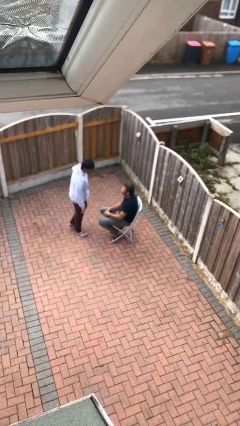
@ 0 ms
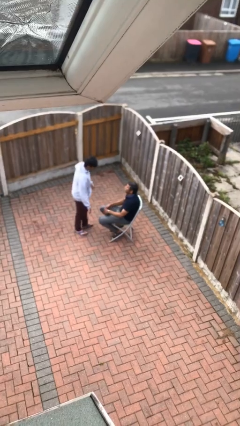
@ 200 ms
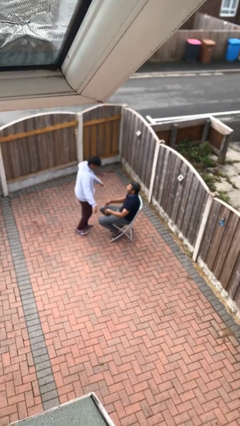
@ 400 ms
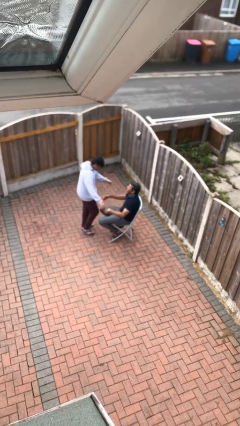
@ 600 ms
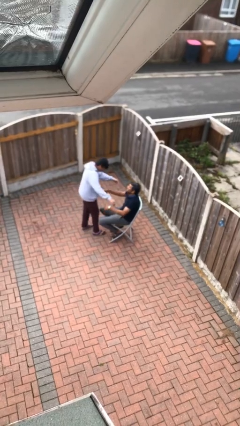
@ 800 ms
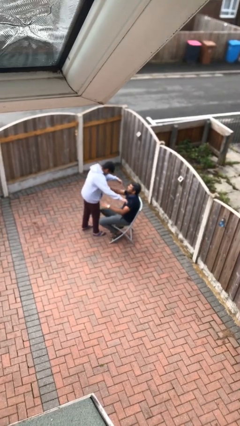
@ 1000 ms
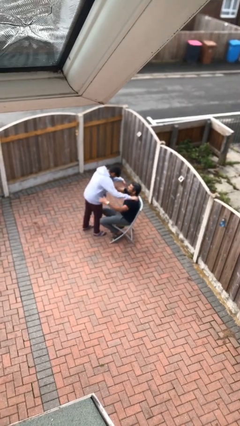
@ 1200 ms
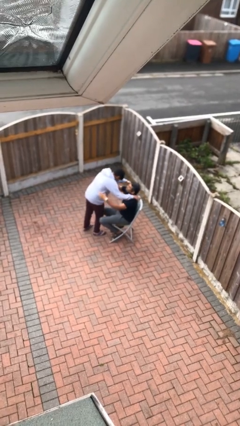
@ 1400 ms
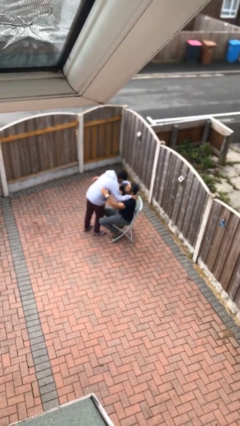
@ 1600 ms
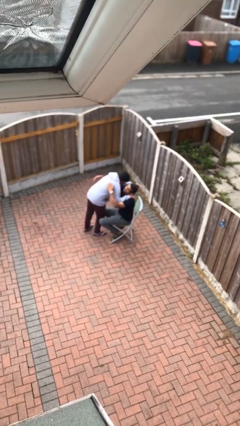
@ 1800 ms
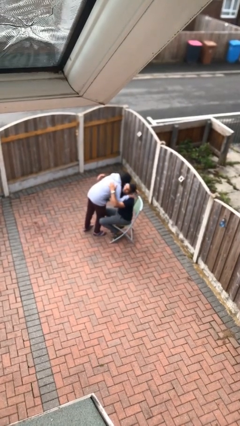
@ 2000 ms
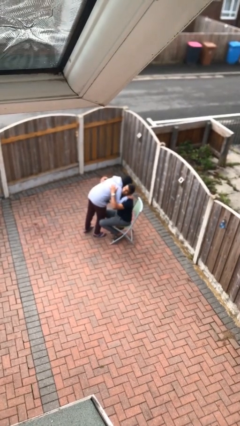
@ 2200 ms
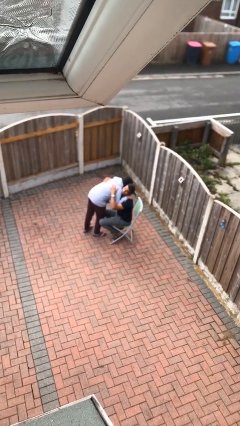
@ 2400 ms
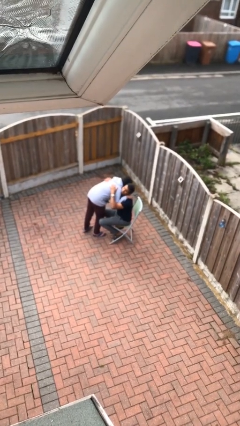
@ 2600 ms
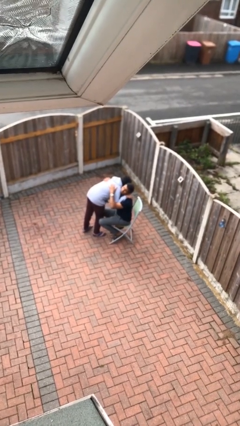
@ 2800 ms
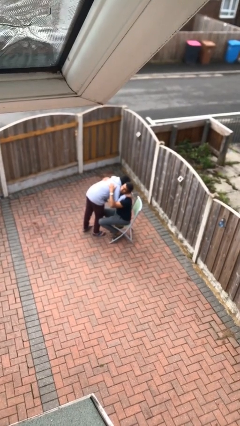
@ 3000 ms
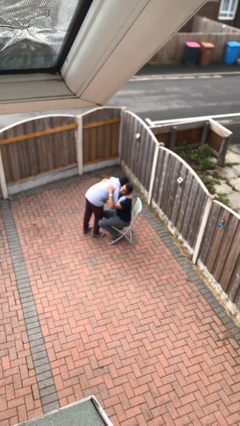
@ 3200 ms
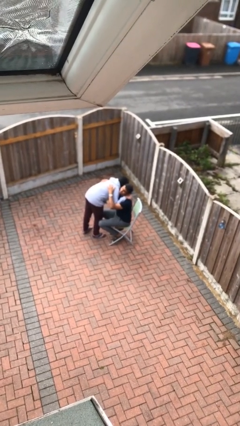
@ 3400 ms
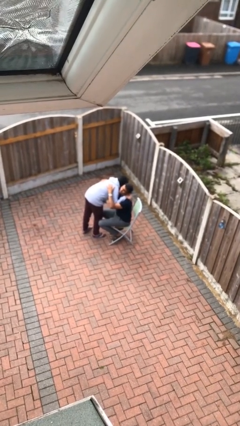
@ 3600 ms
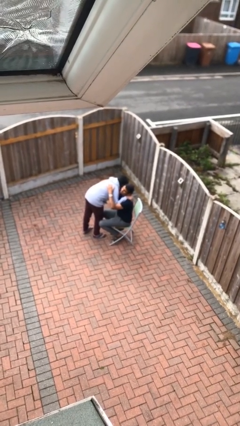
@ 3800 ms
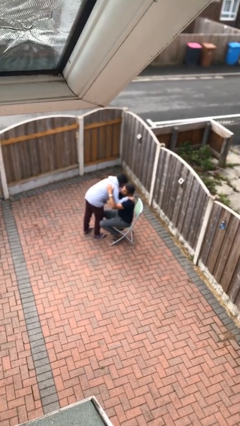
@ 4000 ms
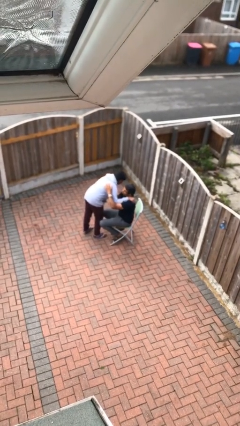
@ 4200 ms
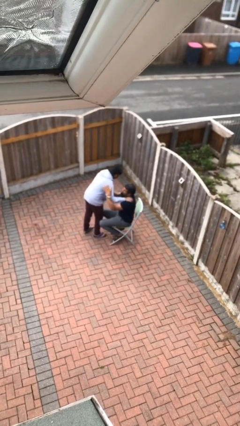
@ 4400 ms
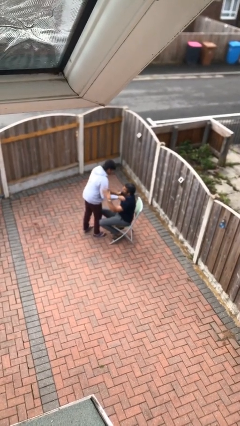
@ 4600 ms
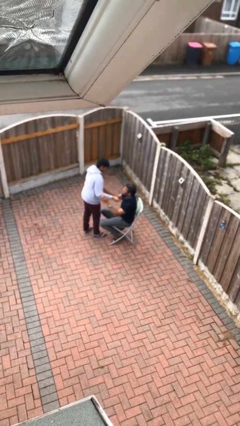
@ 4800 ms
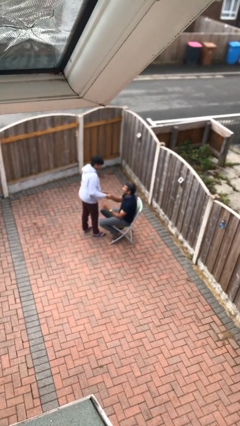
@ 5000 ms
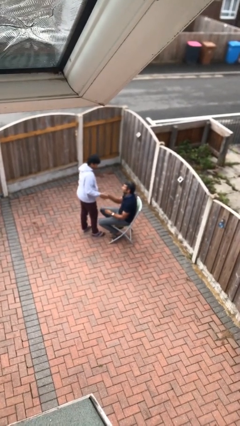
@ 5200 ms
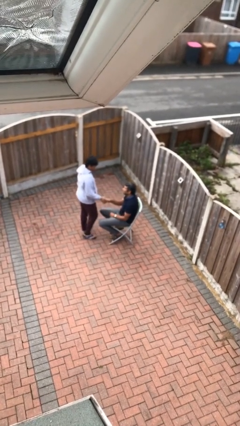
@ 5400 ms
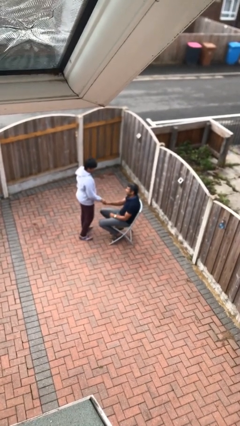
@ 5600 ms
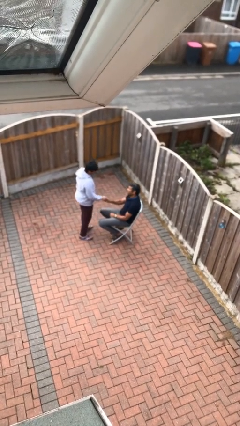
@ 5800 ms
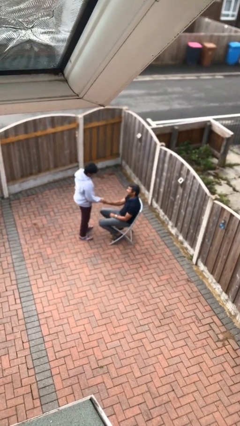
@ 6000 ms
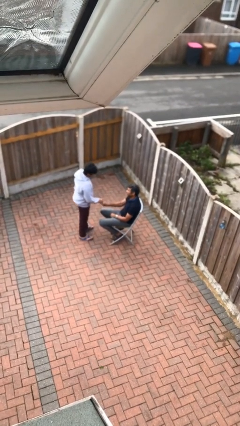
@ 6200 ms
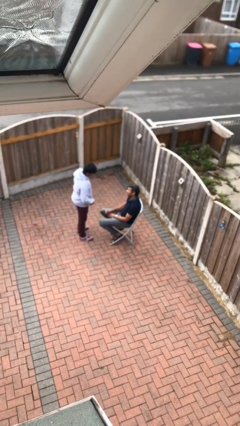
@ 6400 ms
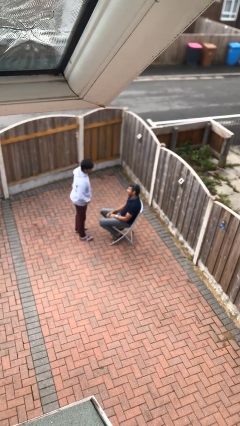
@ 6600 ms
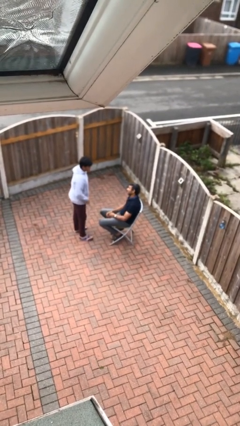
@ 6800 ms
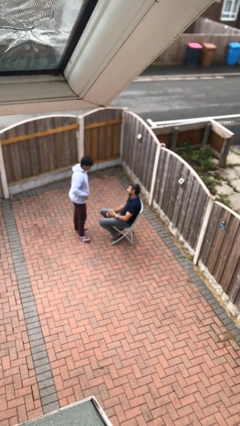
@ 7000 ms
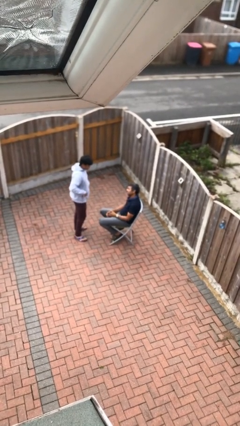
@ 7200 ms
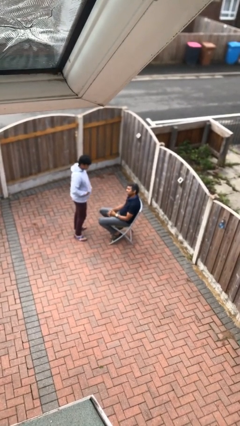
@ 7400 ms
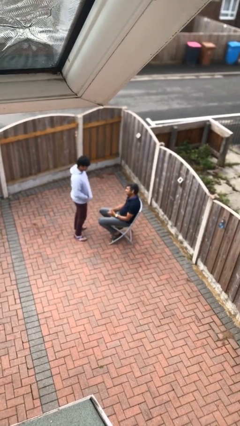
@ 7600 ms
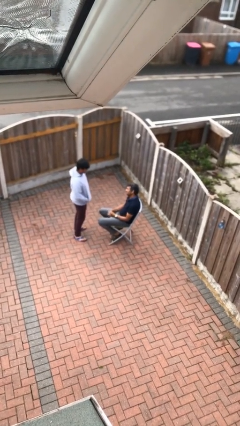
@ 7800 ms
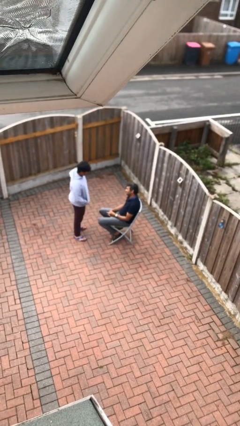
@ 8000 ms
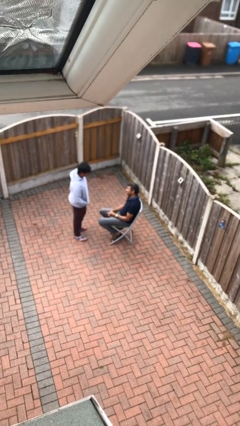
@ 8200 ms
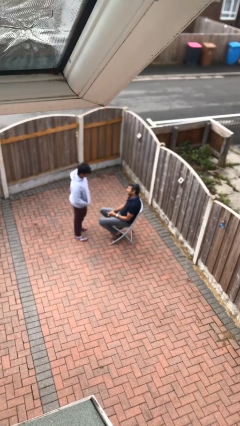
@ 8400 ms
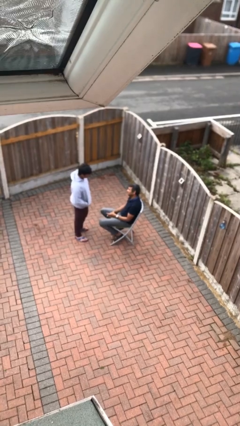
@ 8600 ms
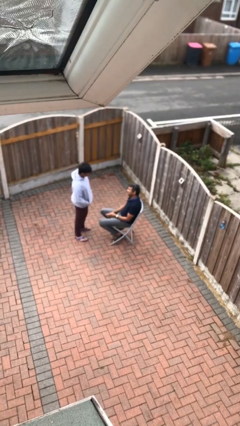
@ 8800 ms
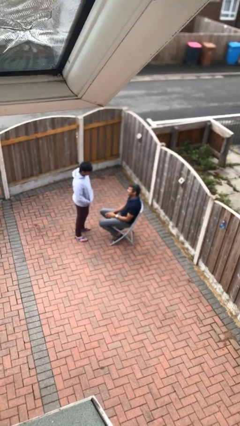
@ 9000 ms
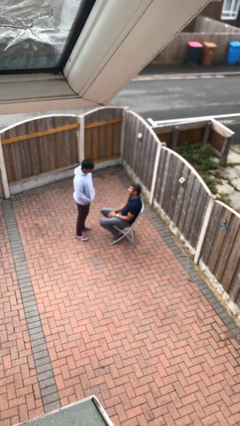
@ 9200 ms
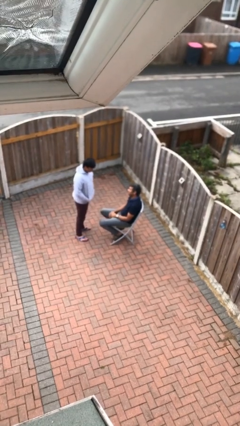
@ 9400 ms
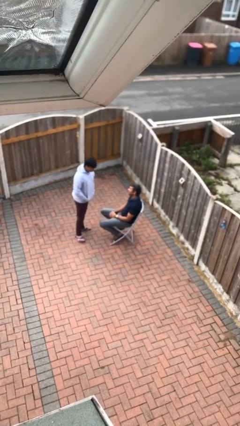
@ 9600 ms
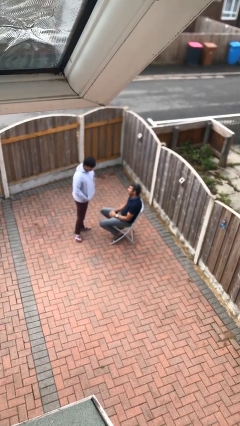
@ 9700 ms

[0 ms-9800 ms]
person embraces person

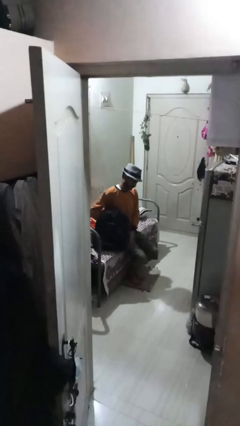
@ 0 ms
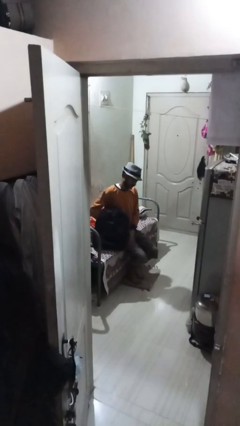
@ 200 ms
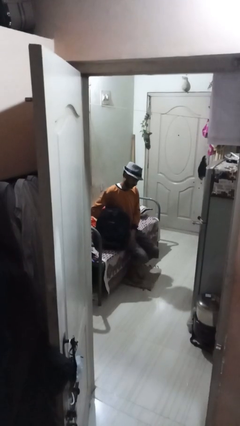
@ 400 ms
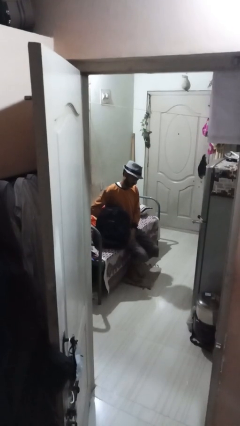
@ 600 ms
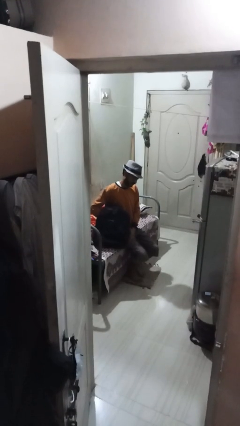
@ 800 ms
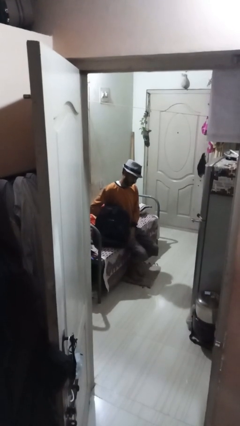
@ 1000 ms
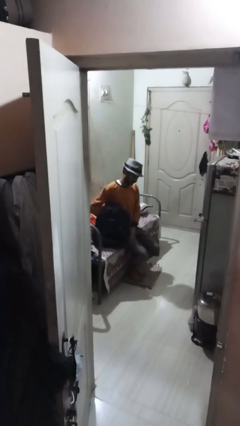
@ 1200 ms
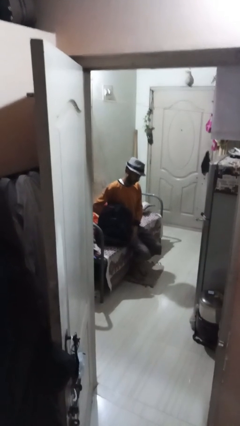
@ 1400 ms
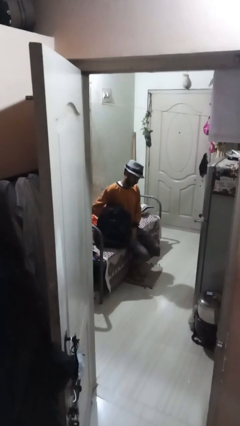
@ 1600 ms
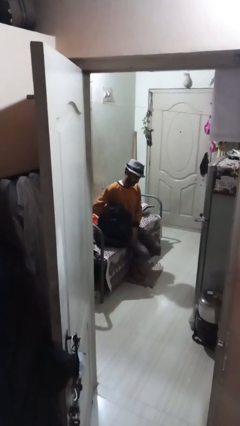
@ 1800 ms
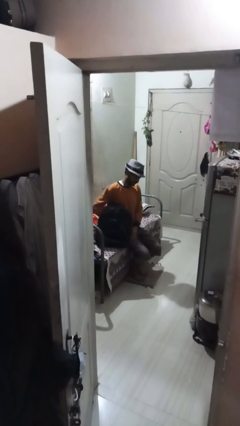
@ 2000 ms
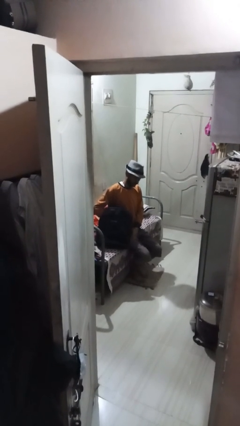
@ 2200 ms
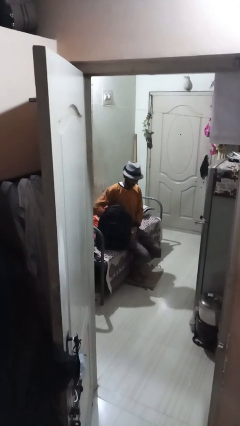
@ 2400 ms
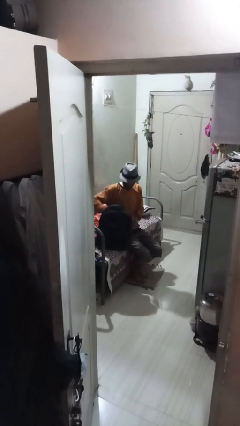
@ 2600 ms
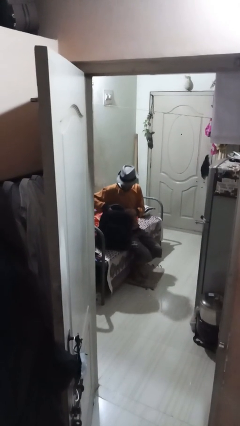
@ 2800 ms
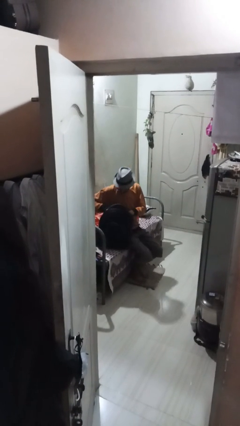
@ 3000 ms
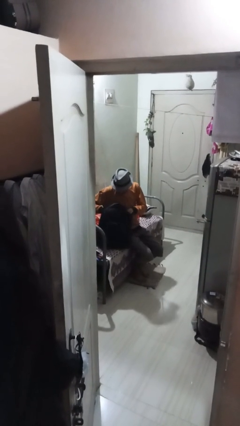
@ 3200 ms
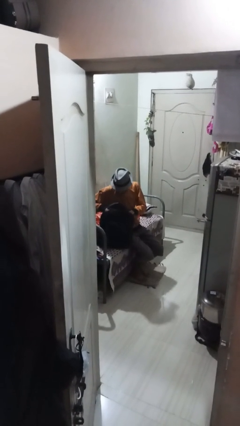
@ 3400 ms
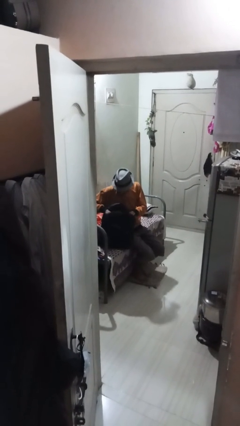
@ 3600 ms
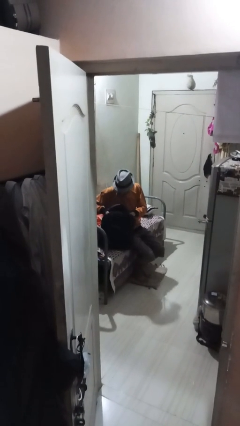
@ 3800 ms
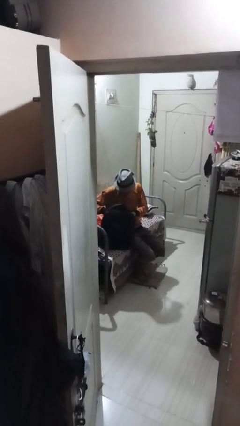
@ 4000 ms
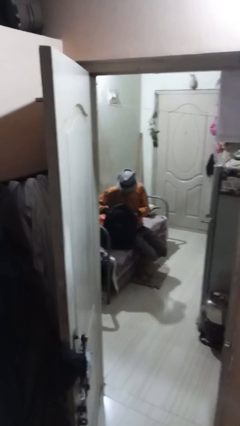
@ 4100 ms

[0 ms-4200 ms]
person searches in backpack

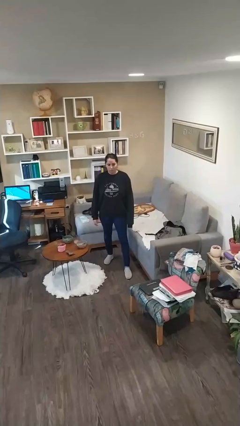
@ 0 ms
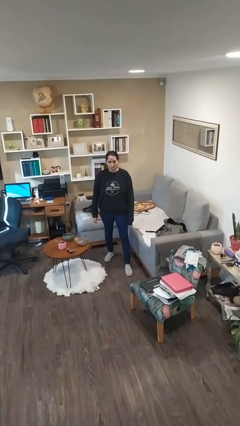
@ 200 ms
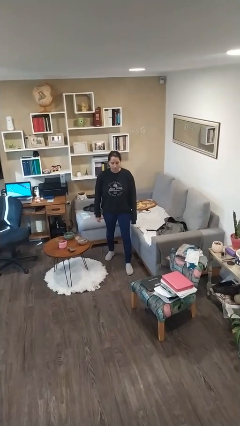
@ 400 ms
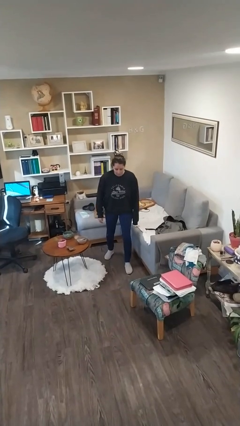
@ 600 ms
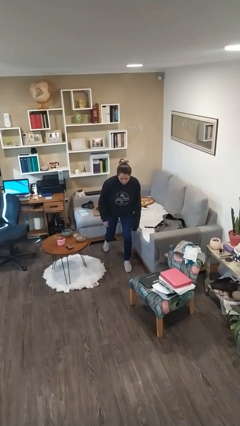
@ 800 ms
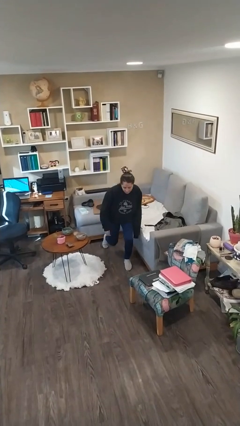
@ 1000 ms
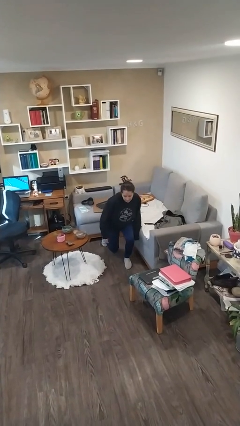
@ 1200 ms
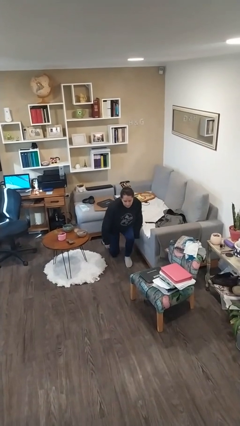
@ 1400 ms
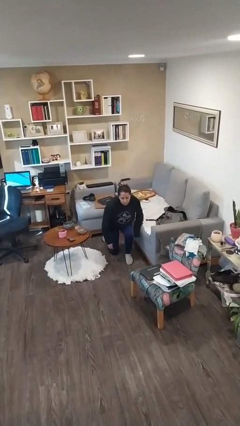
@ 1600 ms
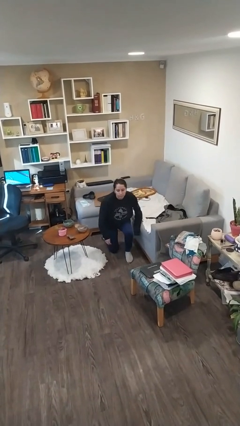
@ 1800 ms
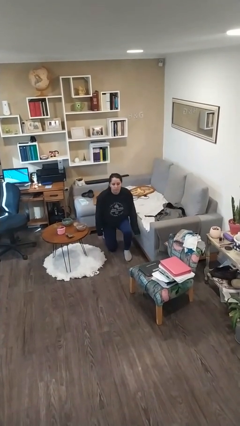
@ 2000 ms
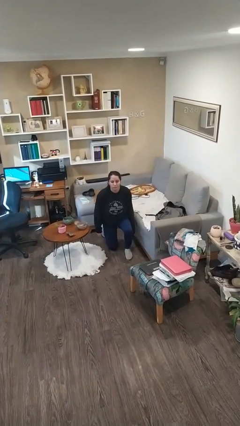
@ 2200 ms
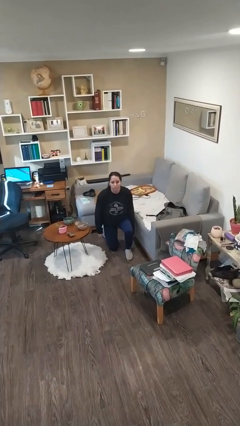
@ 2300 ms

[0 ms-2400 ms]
person kneels

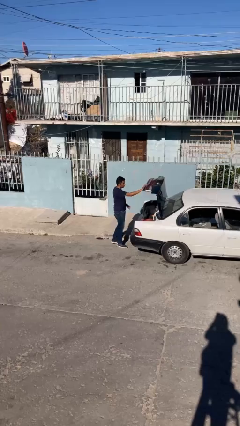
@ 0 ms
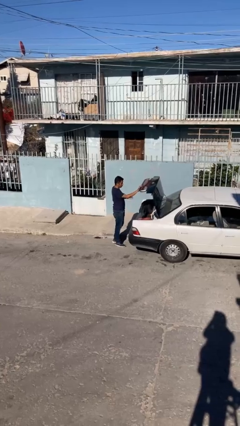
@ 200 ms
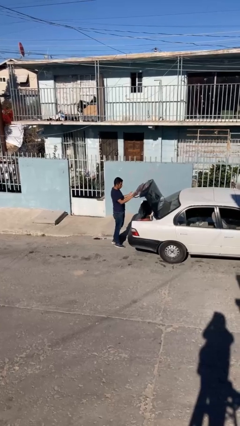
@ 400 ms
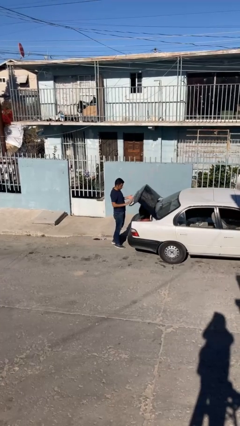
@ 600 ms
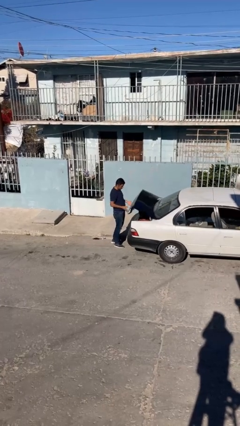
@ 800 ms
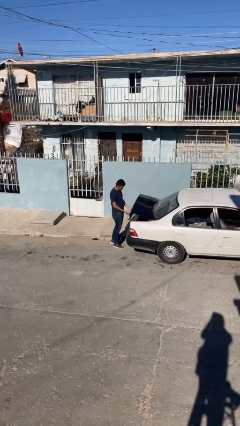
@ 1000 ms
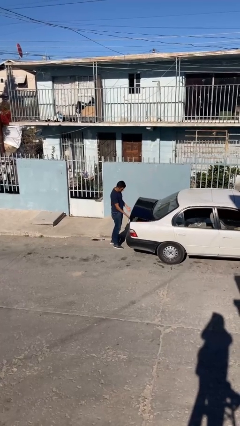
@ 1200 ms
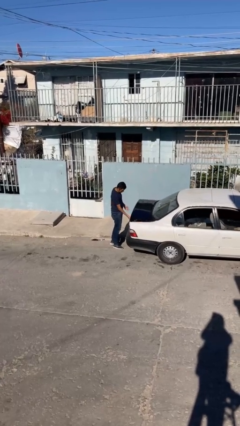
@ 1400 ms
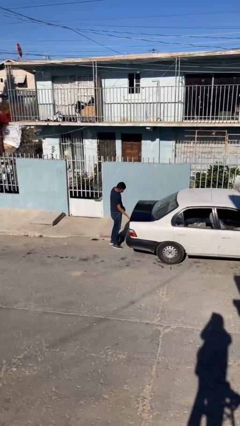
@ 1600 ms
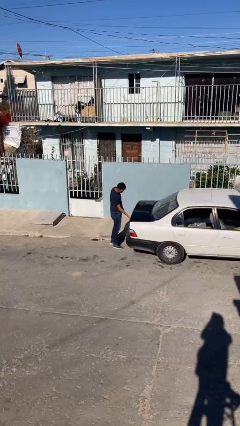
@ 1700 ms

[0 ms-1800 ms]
person exits car
